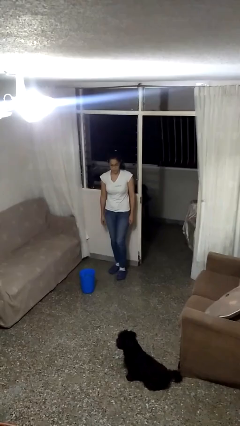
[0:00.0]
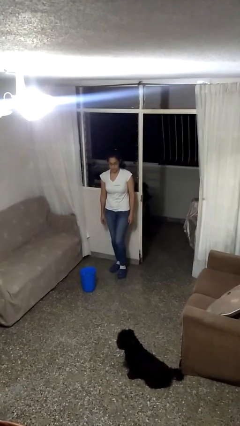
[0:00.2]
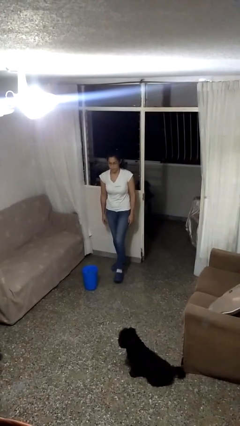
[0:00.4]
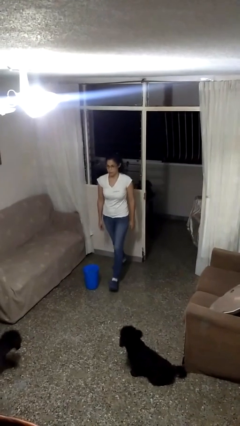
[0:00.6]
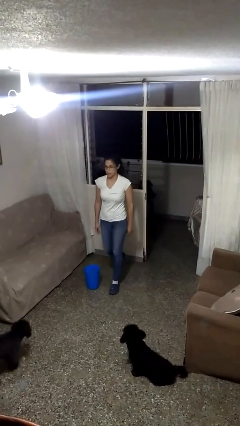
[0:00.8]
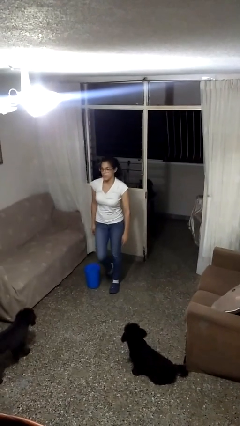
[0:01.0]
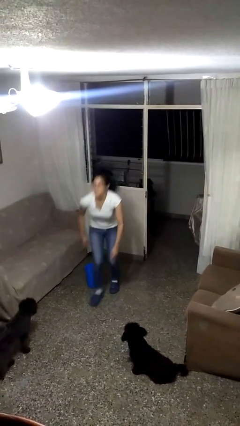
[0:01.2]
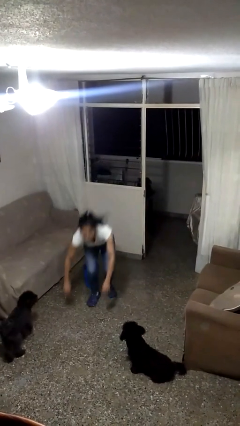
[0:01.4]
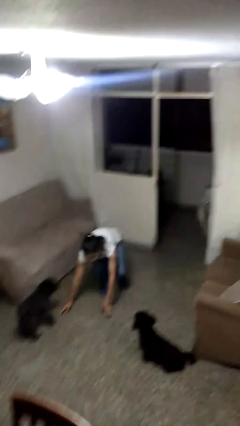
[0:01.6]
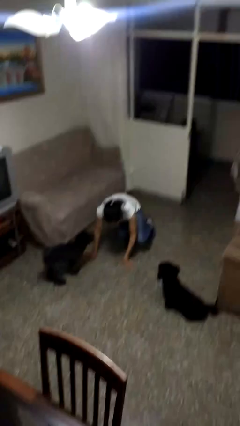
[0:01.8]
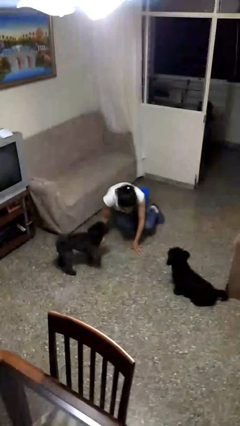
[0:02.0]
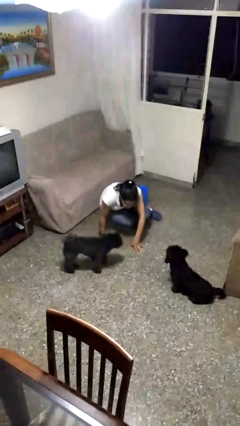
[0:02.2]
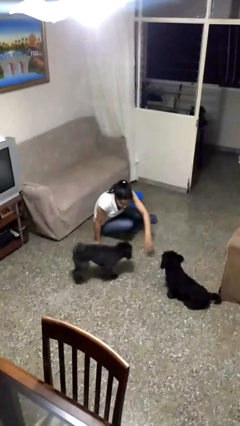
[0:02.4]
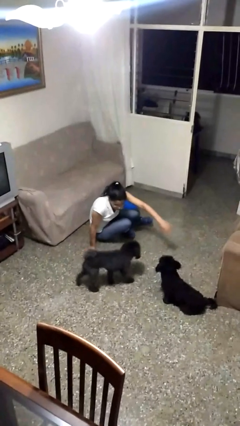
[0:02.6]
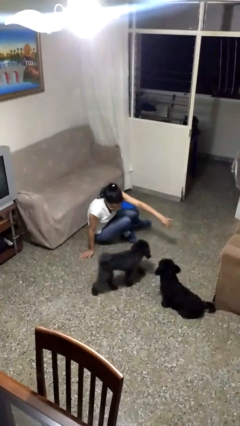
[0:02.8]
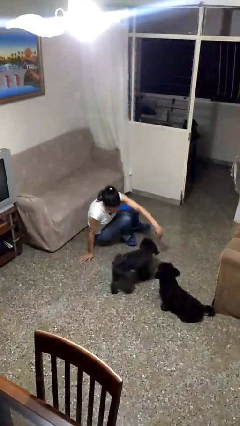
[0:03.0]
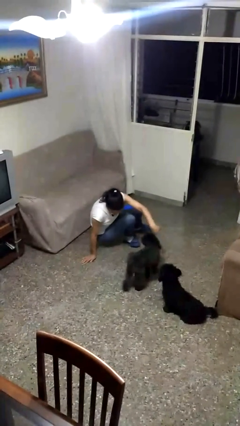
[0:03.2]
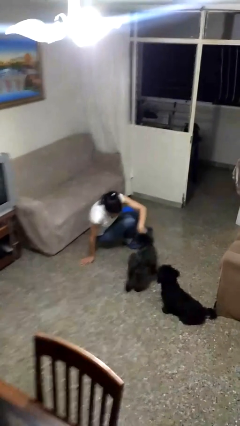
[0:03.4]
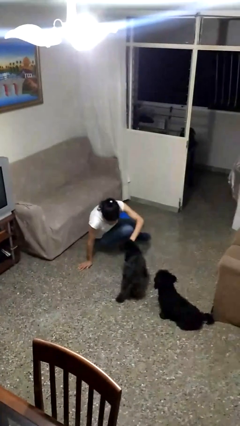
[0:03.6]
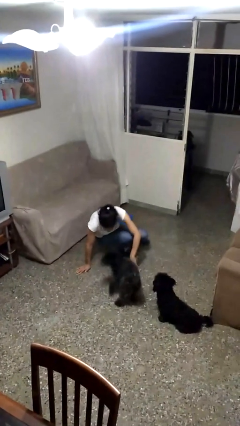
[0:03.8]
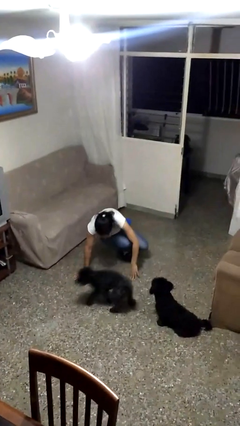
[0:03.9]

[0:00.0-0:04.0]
person trips on object on floor

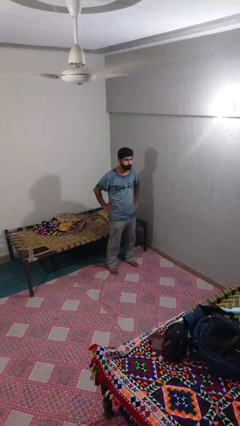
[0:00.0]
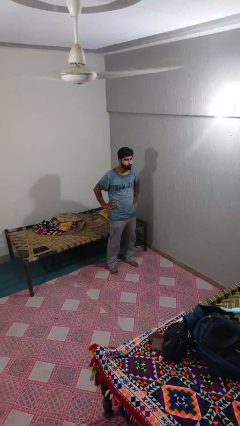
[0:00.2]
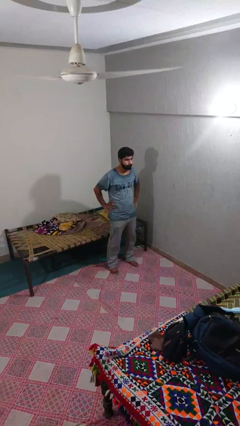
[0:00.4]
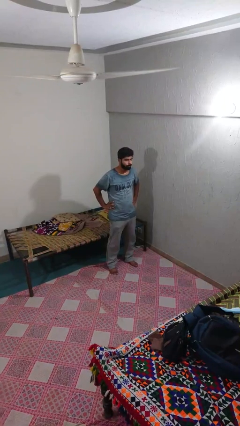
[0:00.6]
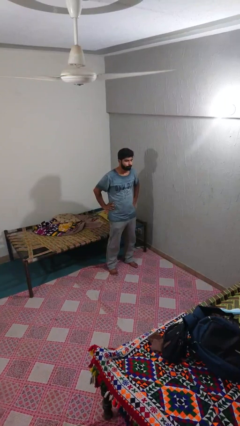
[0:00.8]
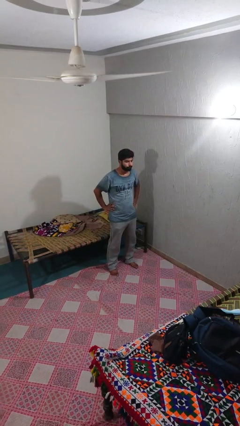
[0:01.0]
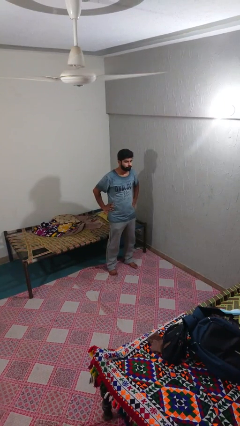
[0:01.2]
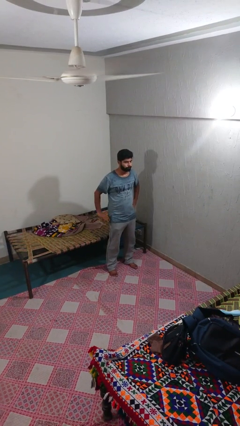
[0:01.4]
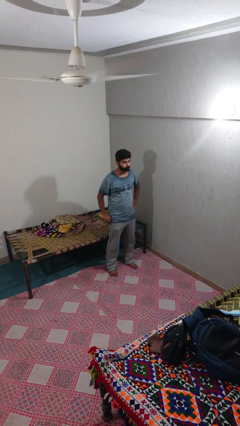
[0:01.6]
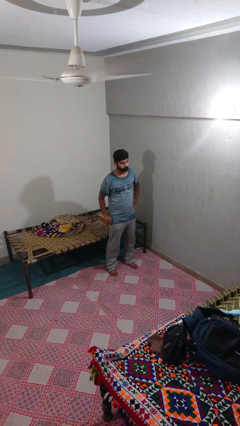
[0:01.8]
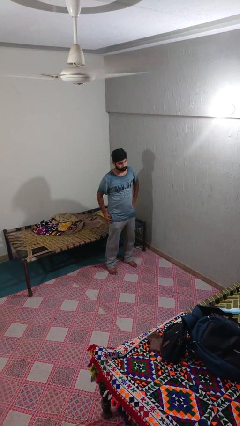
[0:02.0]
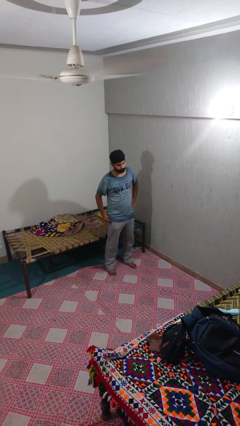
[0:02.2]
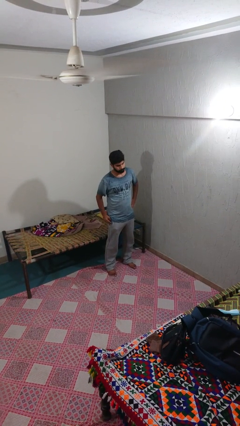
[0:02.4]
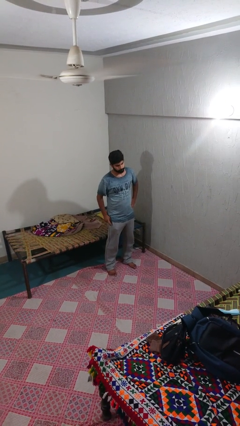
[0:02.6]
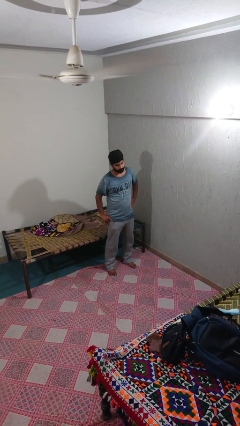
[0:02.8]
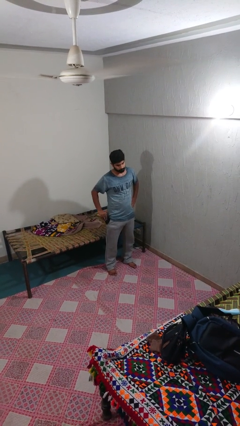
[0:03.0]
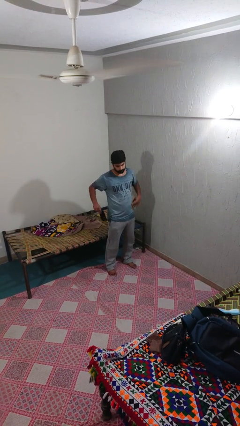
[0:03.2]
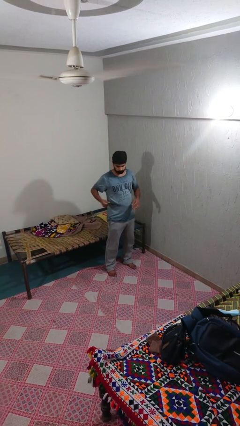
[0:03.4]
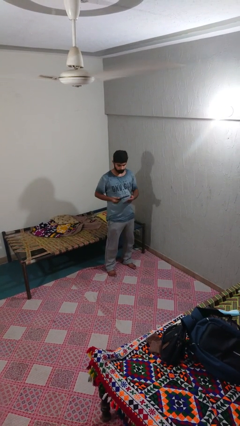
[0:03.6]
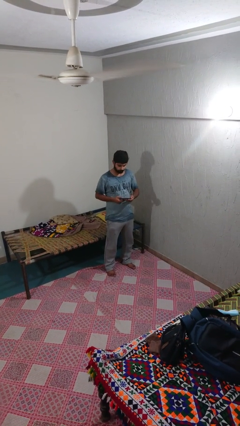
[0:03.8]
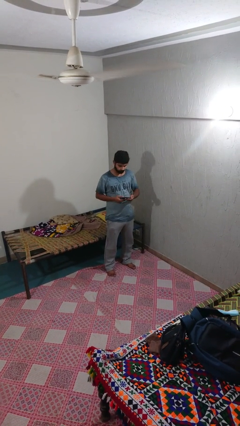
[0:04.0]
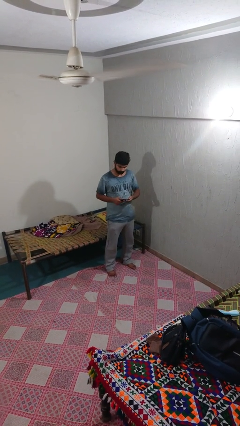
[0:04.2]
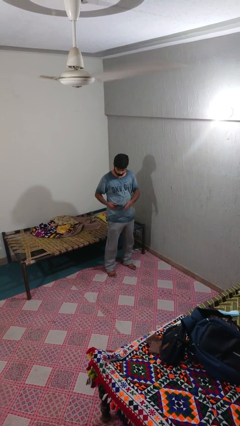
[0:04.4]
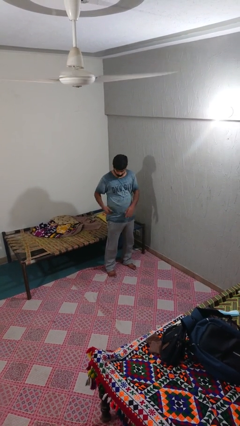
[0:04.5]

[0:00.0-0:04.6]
person takes phone from pocket

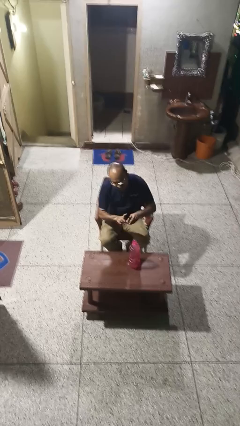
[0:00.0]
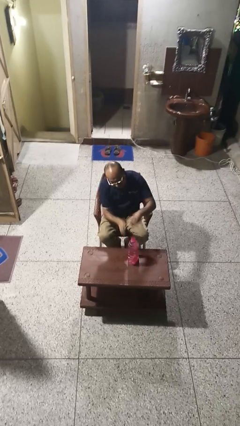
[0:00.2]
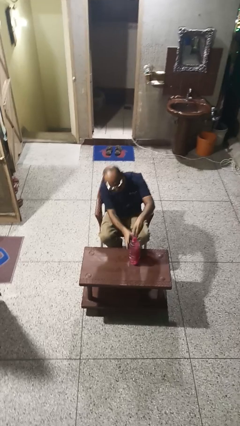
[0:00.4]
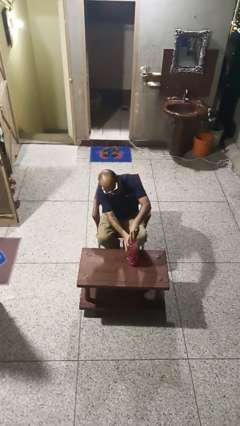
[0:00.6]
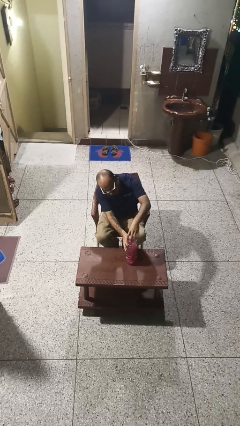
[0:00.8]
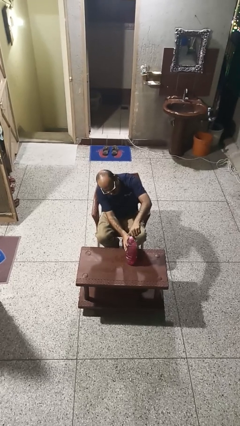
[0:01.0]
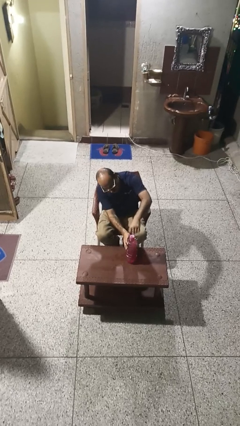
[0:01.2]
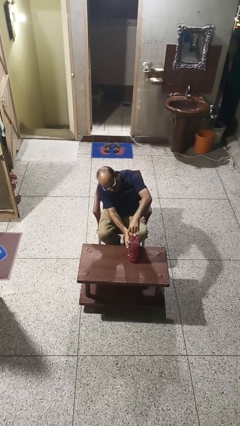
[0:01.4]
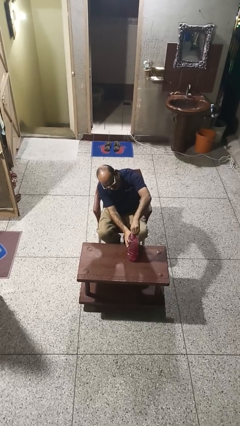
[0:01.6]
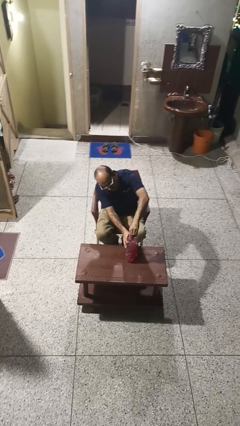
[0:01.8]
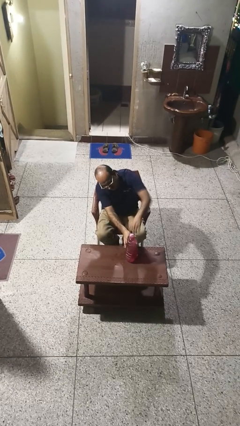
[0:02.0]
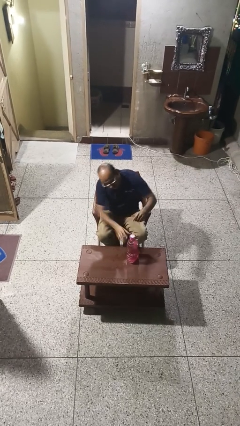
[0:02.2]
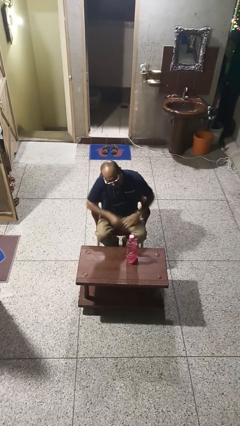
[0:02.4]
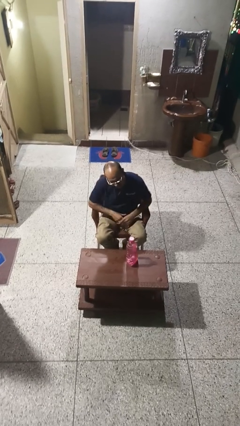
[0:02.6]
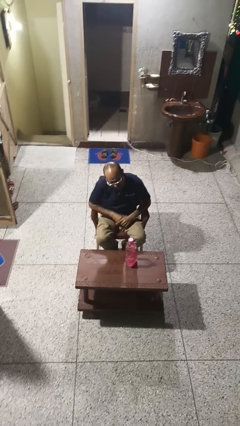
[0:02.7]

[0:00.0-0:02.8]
person screws lid to bottle

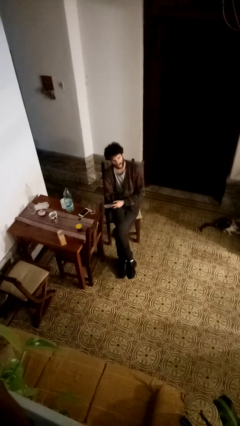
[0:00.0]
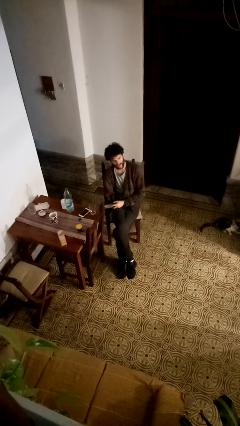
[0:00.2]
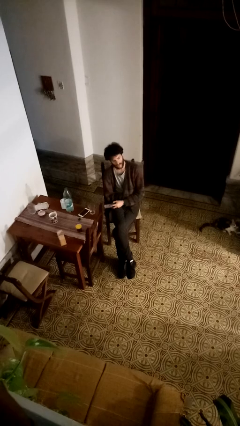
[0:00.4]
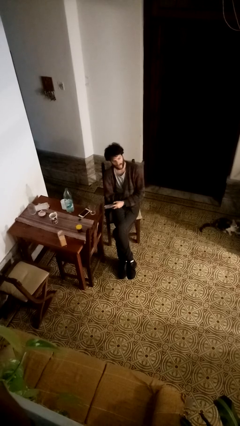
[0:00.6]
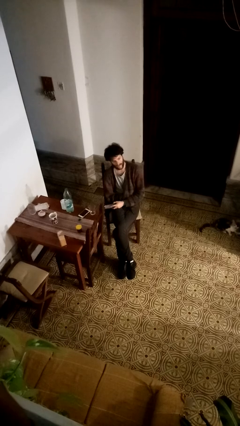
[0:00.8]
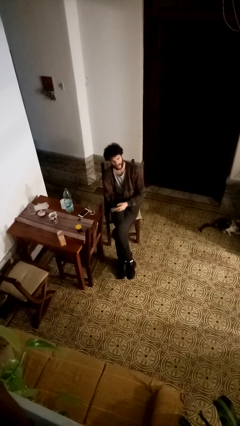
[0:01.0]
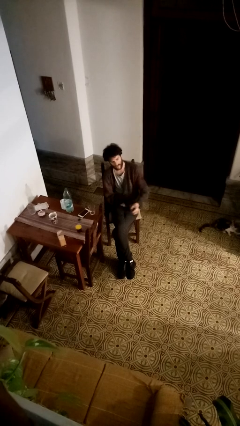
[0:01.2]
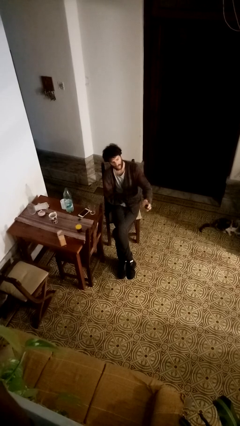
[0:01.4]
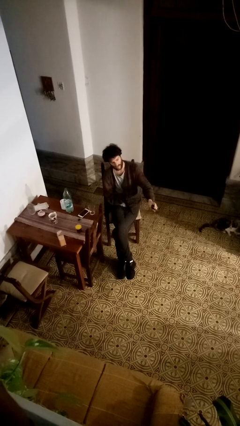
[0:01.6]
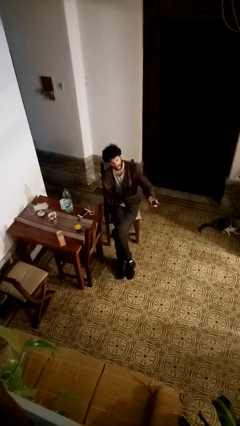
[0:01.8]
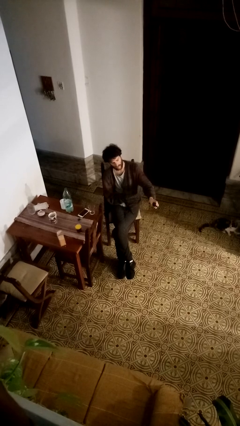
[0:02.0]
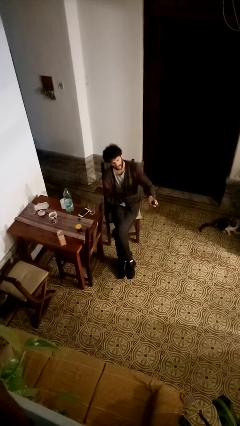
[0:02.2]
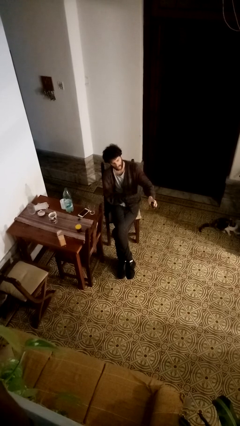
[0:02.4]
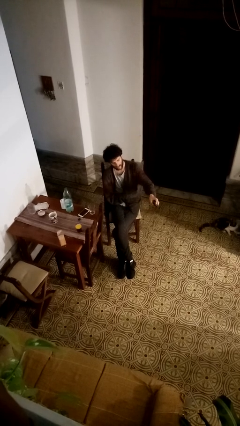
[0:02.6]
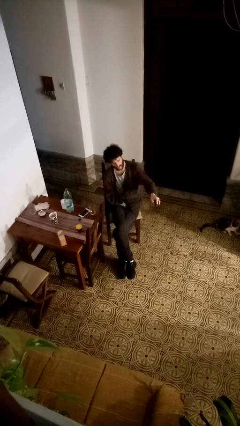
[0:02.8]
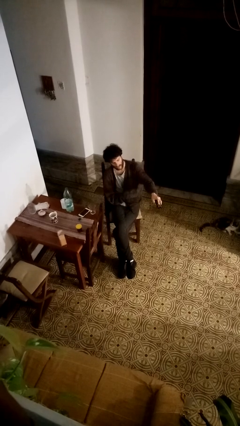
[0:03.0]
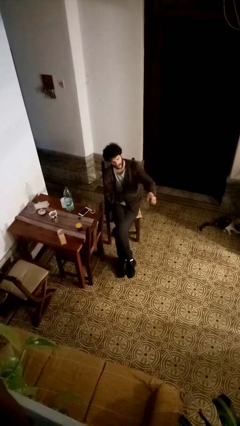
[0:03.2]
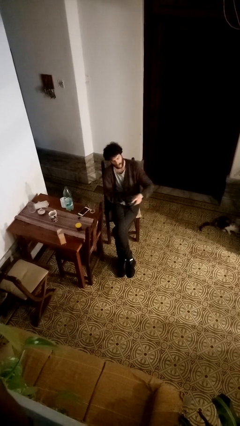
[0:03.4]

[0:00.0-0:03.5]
person uses television remote

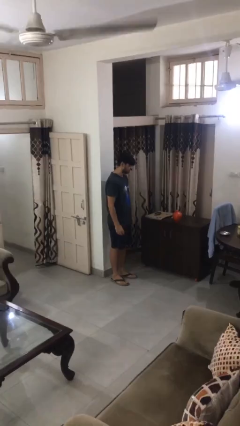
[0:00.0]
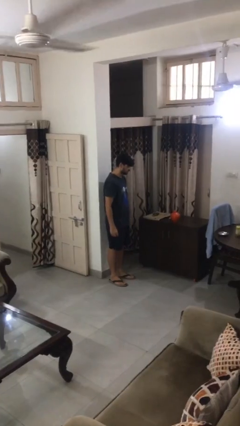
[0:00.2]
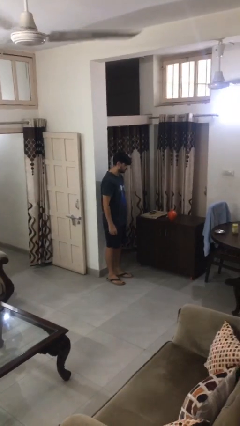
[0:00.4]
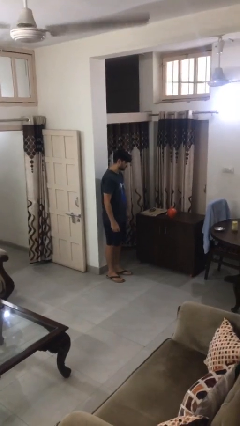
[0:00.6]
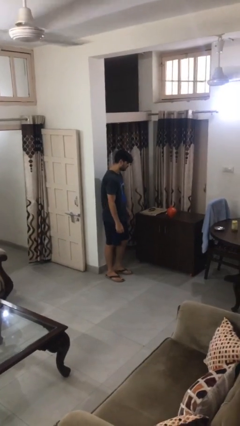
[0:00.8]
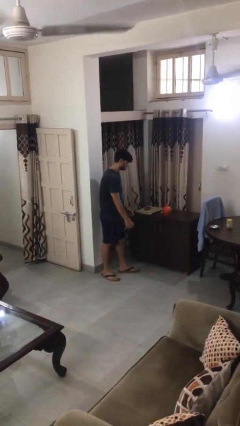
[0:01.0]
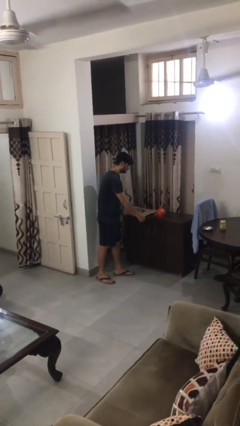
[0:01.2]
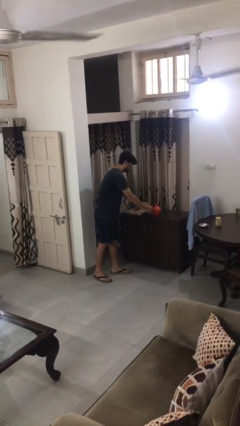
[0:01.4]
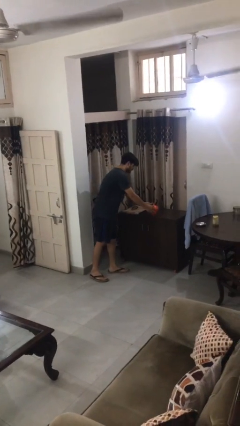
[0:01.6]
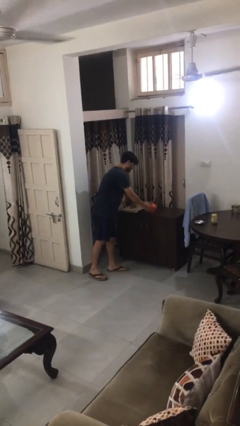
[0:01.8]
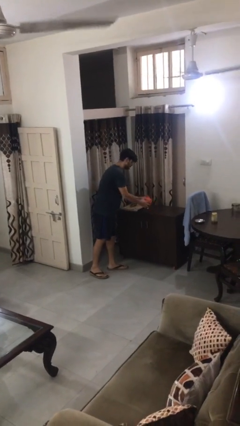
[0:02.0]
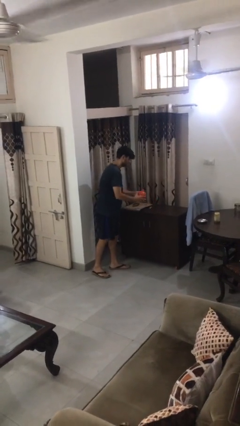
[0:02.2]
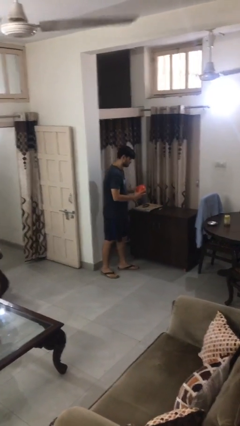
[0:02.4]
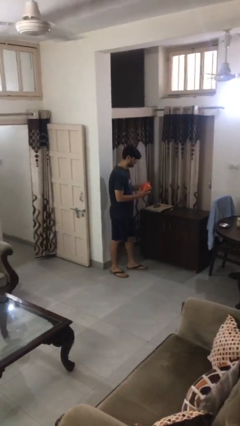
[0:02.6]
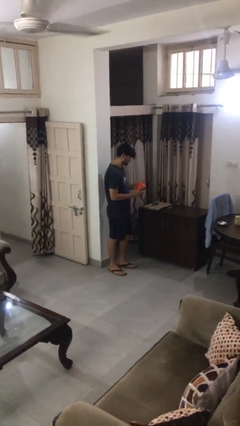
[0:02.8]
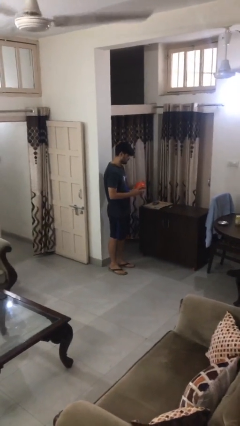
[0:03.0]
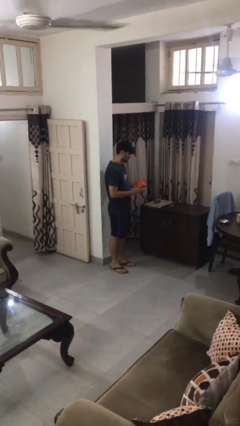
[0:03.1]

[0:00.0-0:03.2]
person picks up object from countertop
